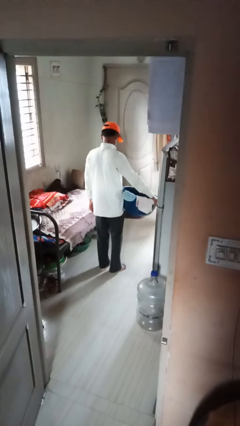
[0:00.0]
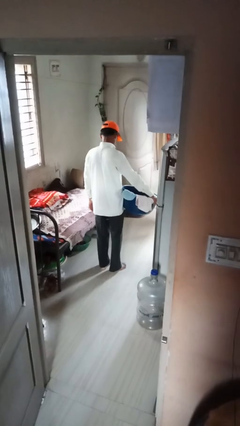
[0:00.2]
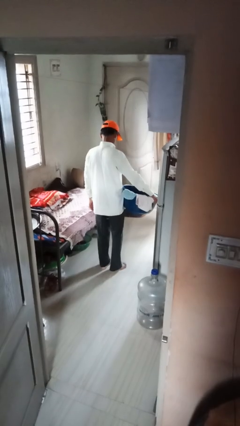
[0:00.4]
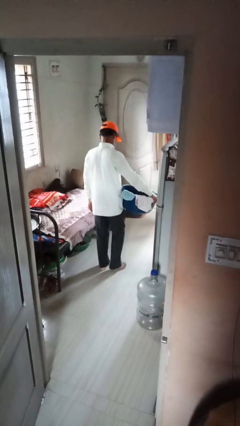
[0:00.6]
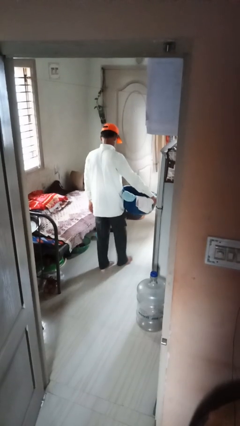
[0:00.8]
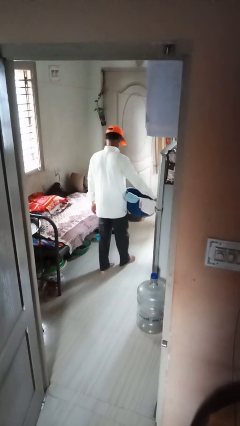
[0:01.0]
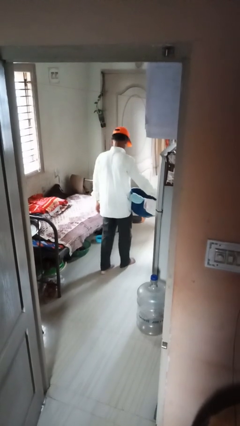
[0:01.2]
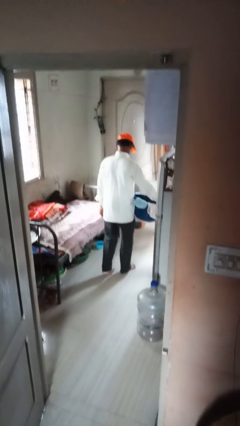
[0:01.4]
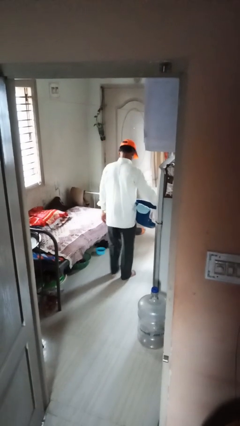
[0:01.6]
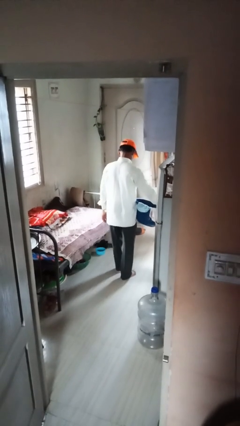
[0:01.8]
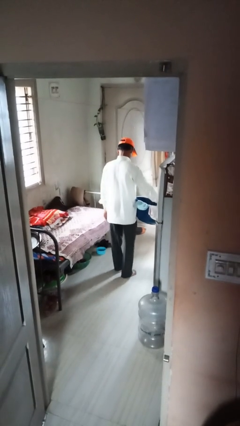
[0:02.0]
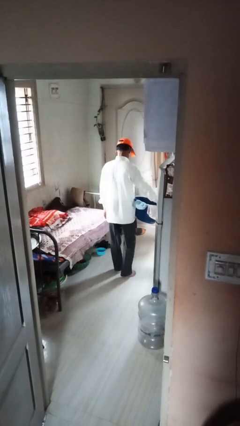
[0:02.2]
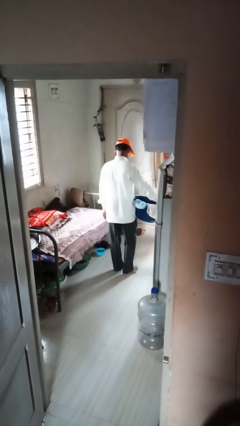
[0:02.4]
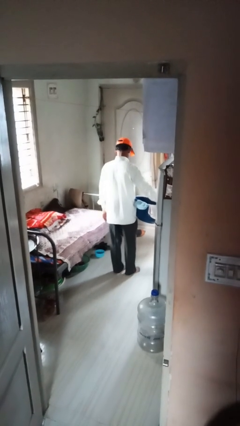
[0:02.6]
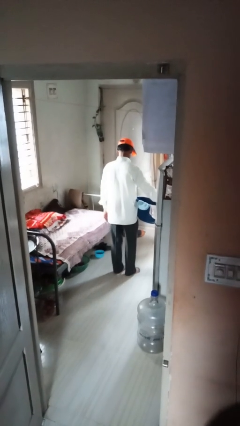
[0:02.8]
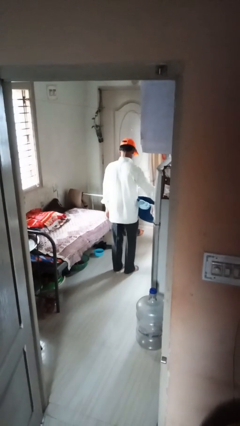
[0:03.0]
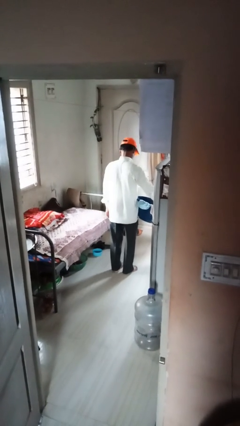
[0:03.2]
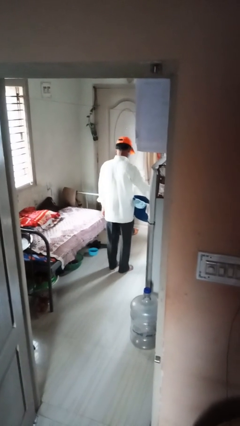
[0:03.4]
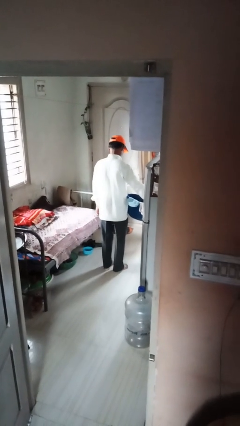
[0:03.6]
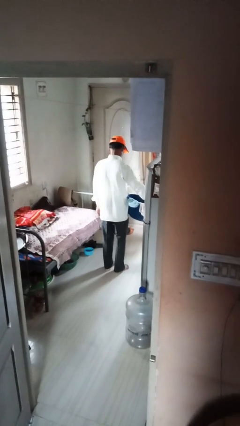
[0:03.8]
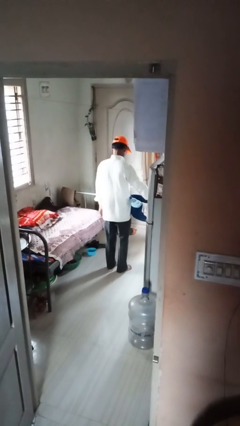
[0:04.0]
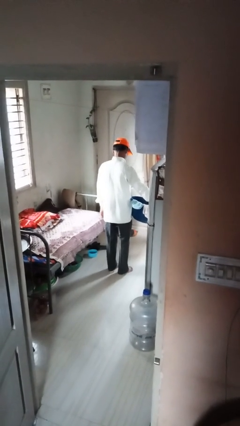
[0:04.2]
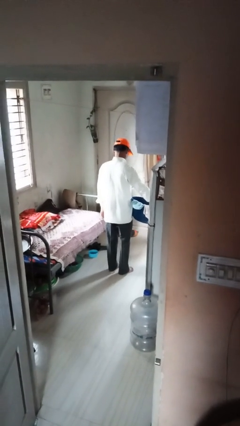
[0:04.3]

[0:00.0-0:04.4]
person carries laundry basket

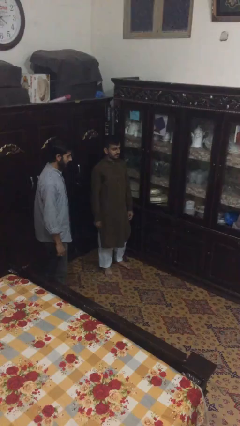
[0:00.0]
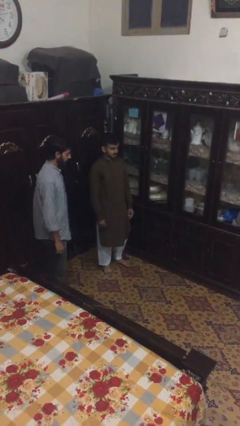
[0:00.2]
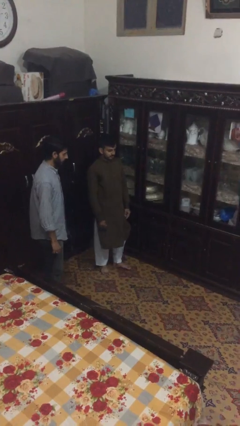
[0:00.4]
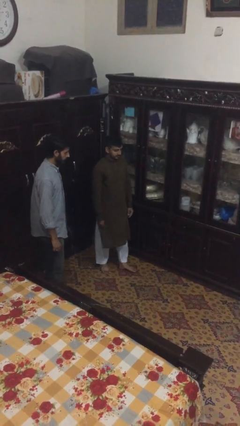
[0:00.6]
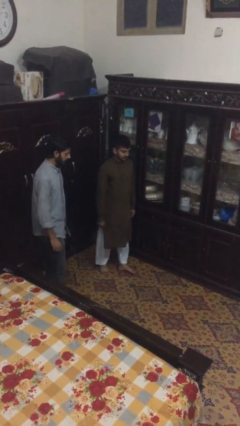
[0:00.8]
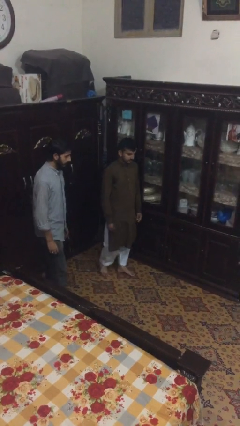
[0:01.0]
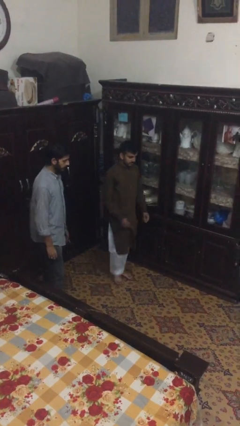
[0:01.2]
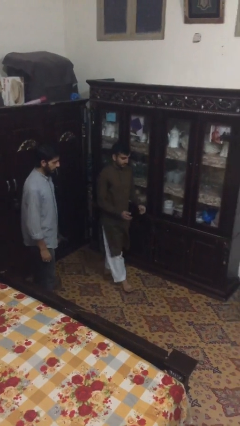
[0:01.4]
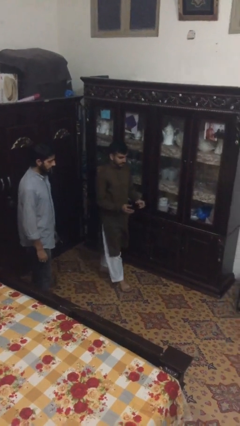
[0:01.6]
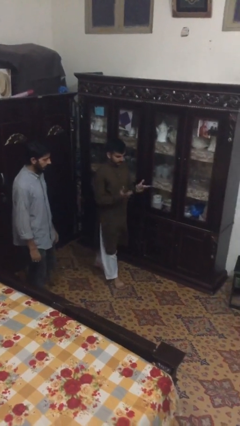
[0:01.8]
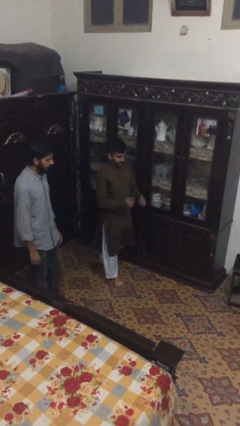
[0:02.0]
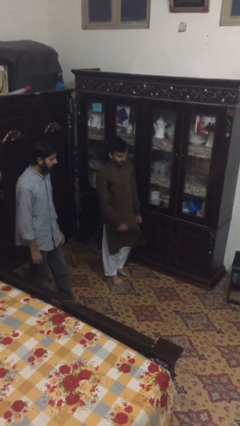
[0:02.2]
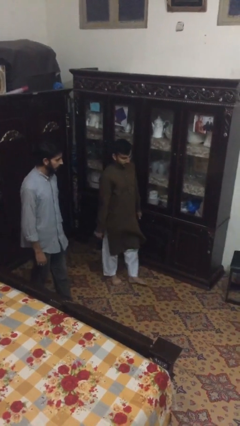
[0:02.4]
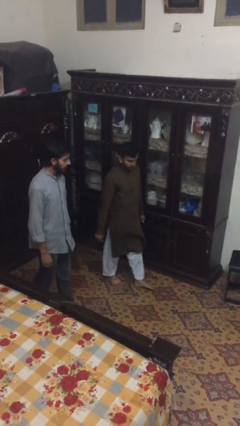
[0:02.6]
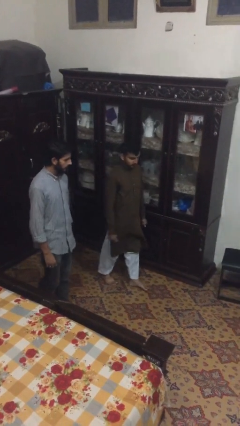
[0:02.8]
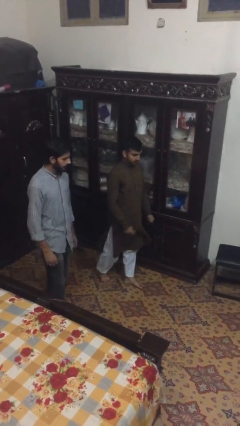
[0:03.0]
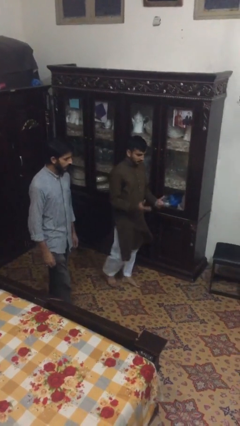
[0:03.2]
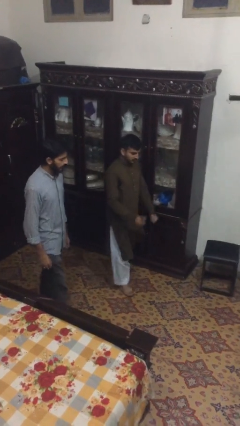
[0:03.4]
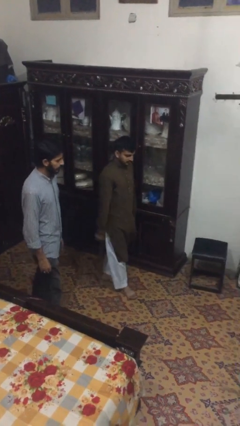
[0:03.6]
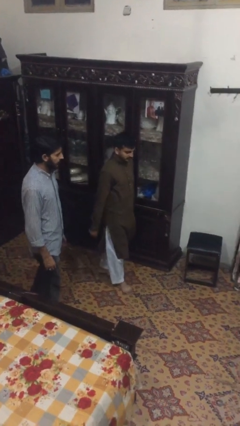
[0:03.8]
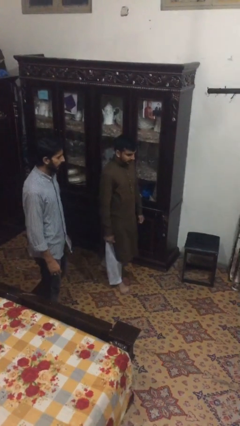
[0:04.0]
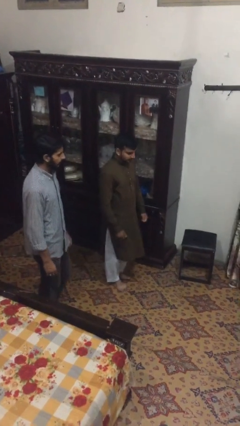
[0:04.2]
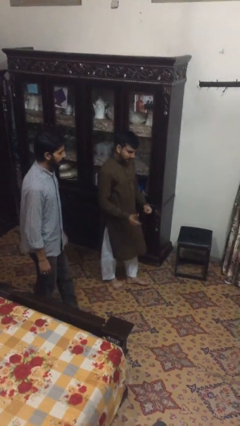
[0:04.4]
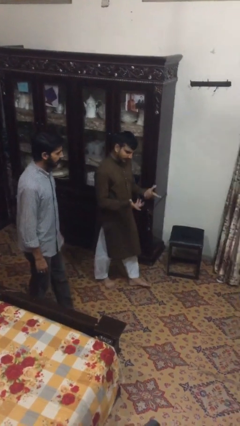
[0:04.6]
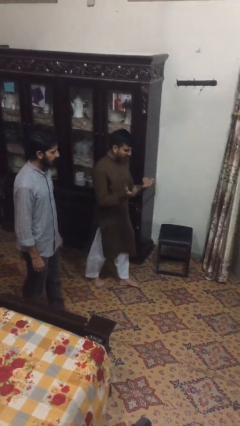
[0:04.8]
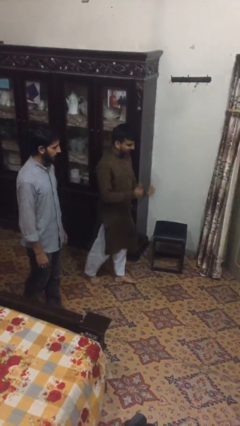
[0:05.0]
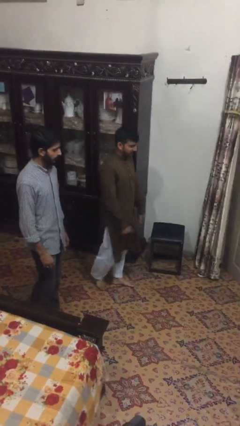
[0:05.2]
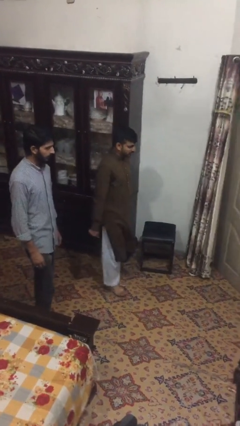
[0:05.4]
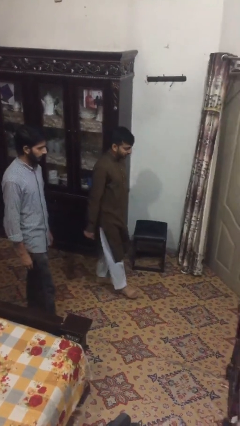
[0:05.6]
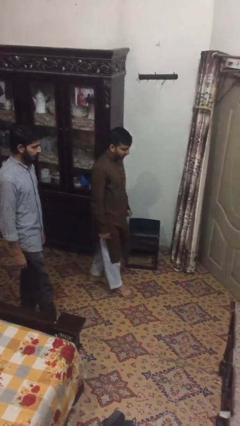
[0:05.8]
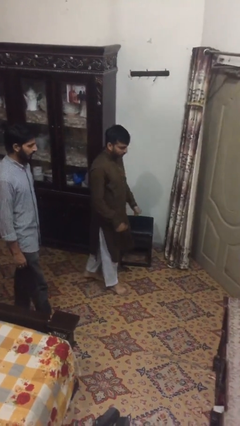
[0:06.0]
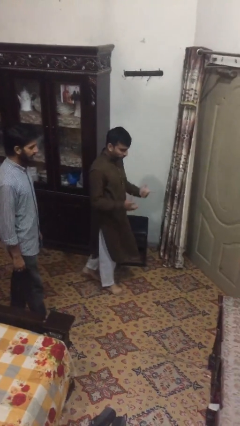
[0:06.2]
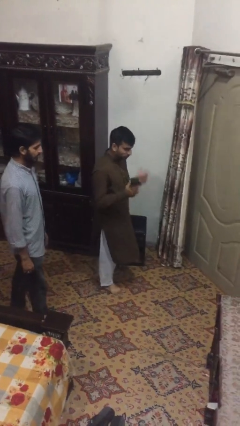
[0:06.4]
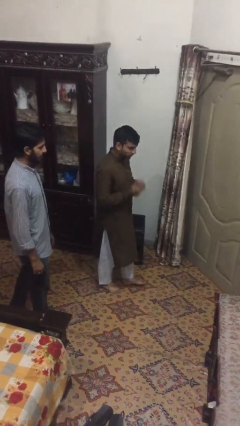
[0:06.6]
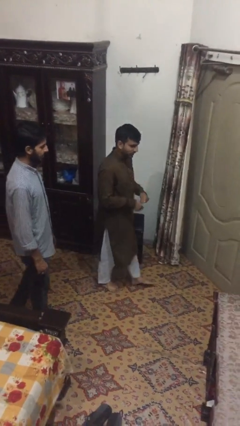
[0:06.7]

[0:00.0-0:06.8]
person talks to person

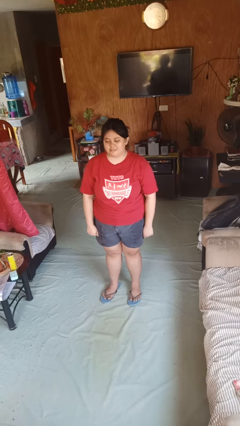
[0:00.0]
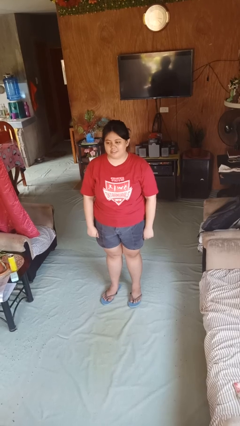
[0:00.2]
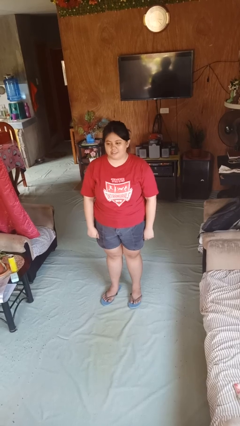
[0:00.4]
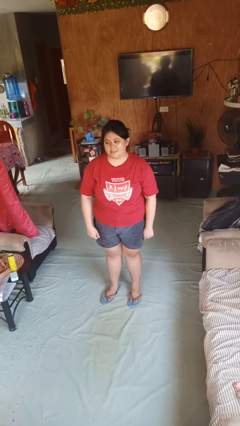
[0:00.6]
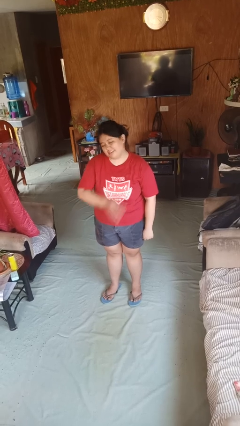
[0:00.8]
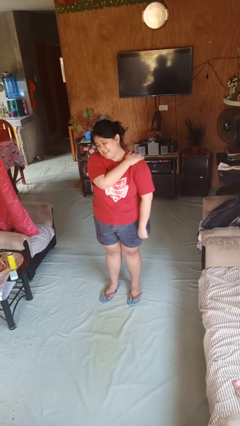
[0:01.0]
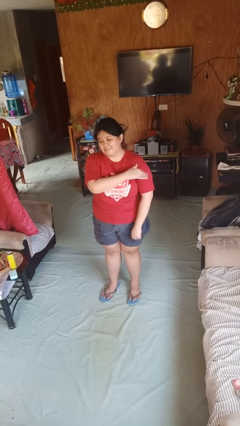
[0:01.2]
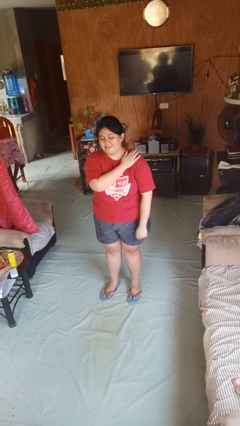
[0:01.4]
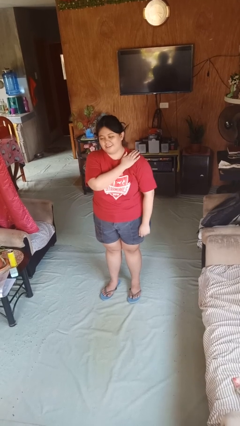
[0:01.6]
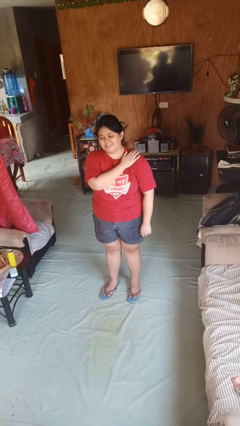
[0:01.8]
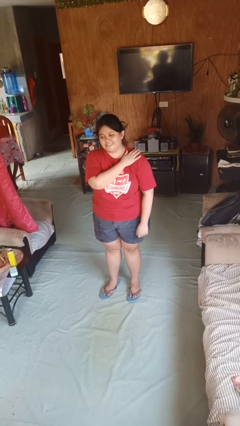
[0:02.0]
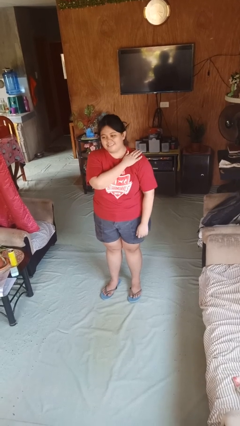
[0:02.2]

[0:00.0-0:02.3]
person swats bug

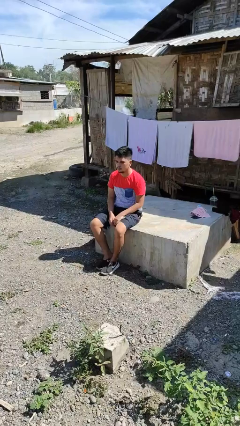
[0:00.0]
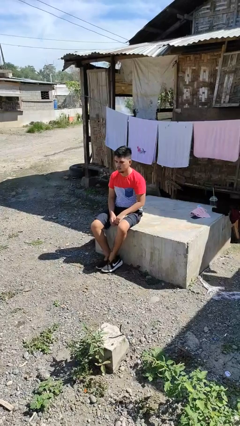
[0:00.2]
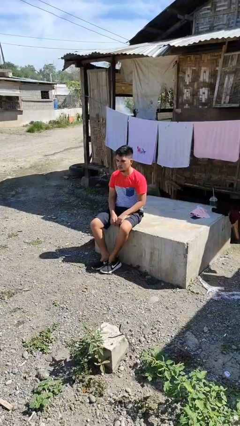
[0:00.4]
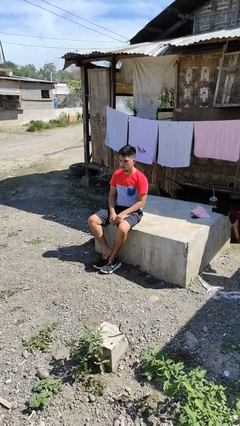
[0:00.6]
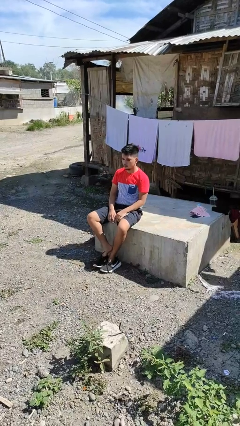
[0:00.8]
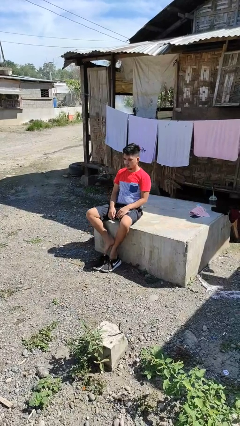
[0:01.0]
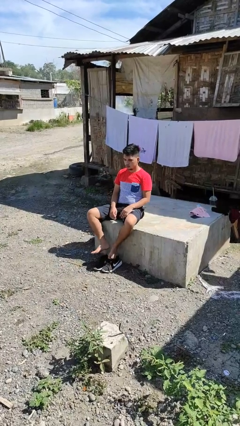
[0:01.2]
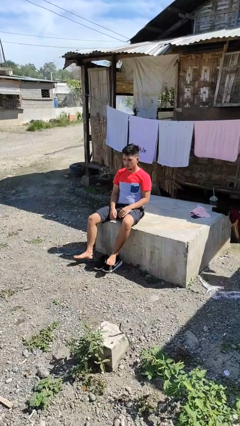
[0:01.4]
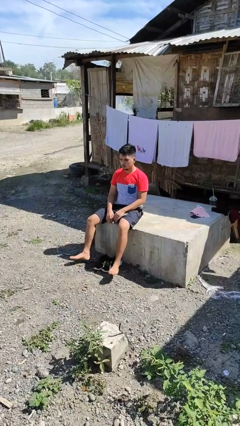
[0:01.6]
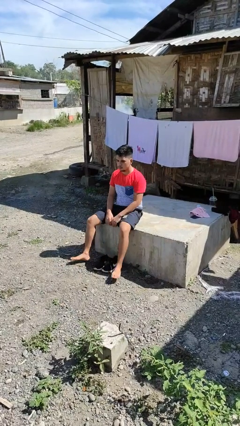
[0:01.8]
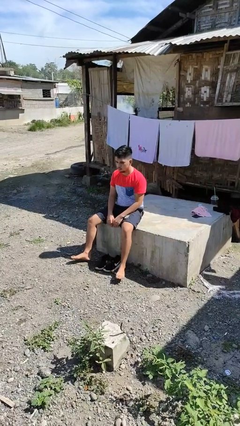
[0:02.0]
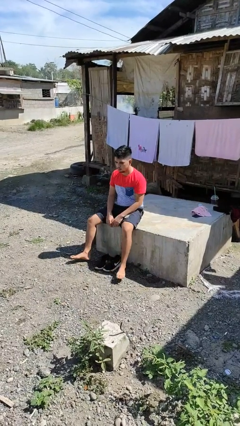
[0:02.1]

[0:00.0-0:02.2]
person takes off shoes

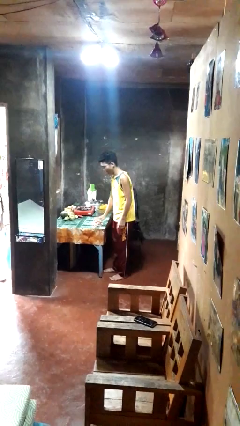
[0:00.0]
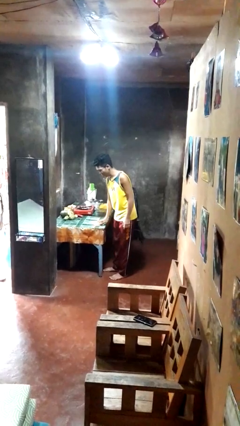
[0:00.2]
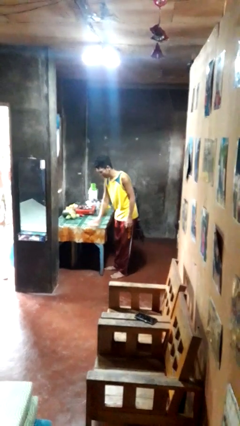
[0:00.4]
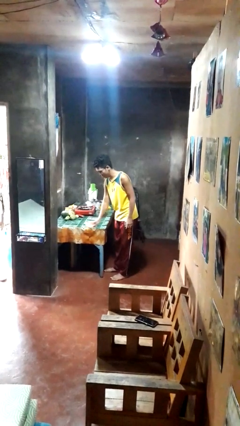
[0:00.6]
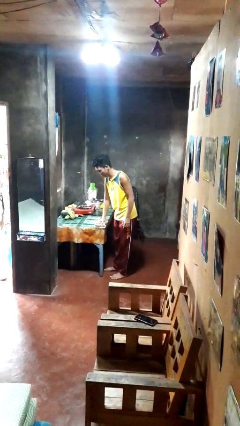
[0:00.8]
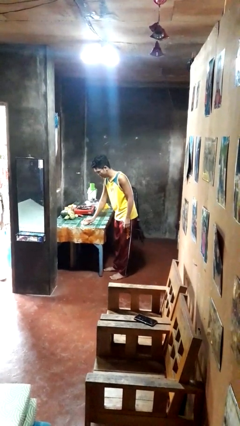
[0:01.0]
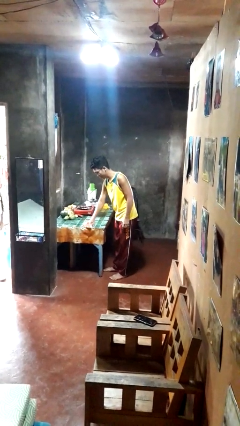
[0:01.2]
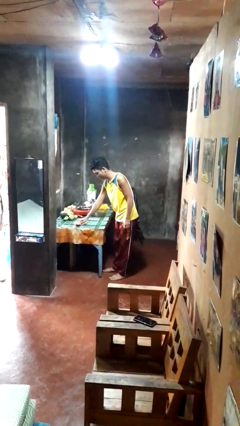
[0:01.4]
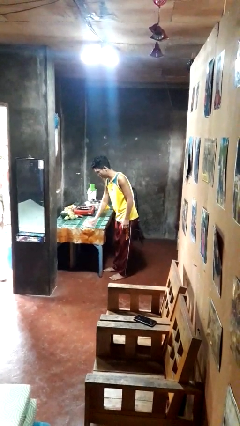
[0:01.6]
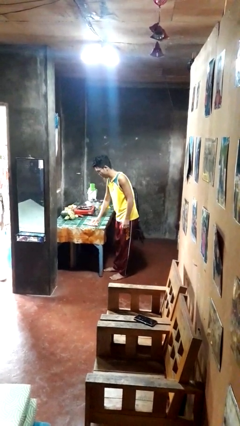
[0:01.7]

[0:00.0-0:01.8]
person cleans table with rag

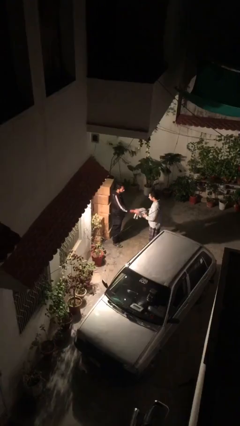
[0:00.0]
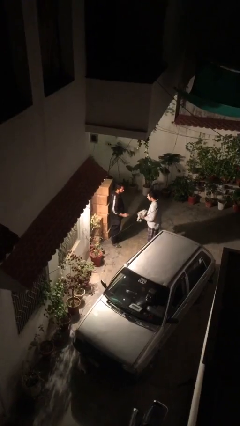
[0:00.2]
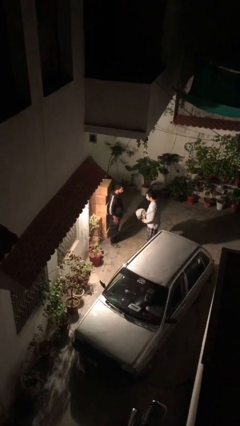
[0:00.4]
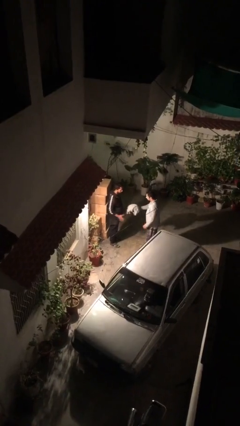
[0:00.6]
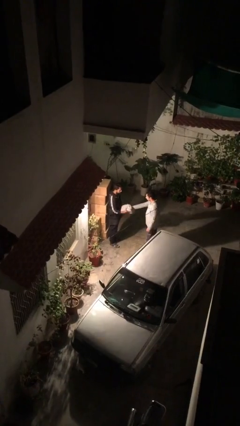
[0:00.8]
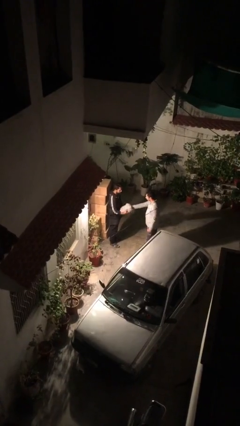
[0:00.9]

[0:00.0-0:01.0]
person transfers object to person
